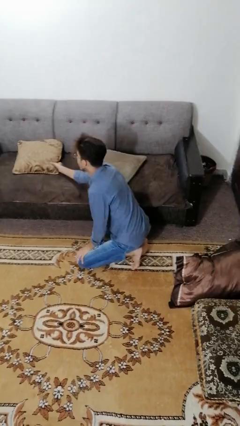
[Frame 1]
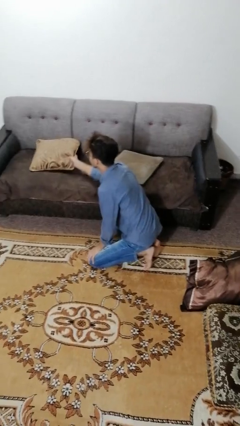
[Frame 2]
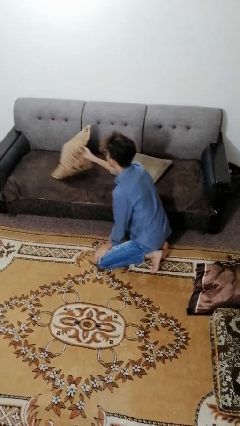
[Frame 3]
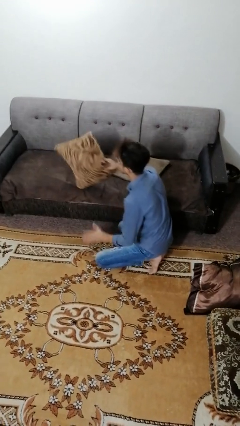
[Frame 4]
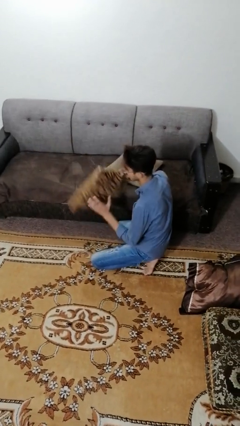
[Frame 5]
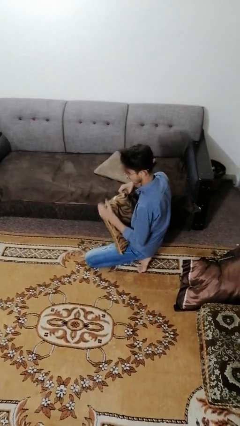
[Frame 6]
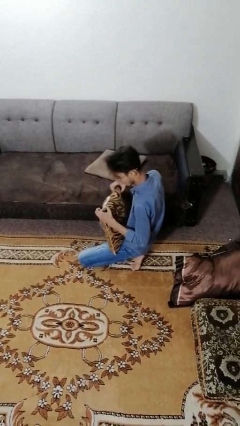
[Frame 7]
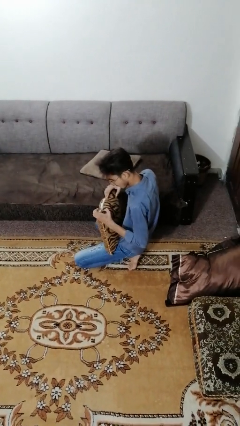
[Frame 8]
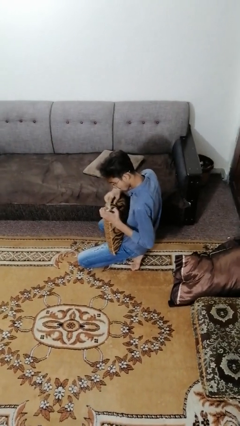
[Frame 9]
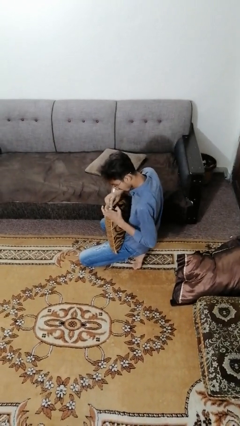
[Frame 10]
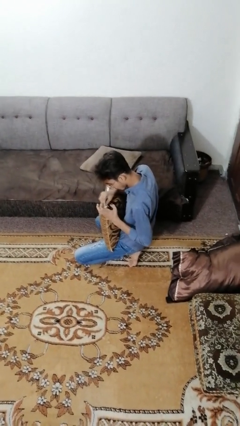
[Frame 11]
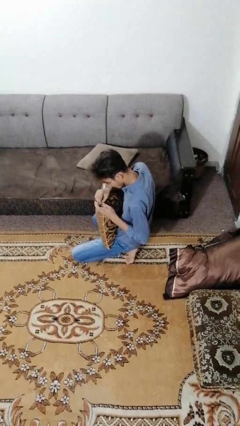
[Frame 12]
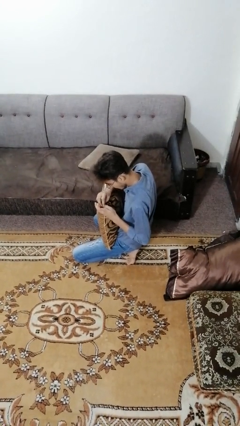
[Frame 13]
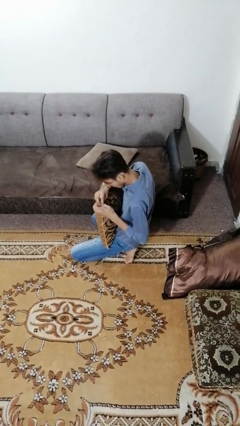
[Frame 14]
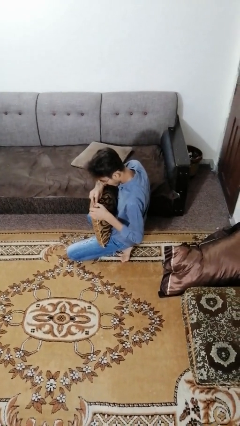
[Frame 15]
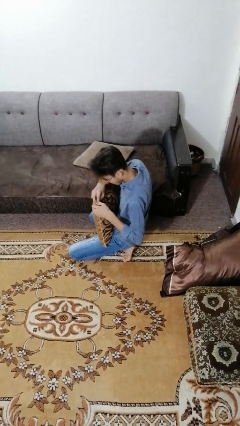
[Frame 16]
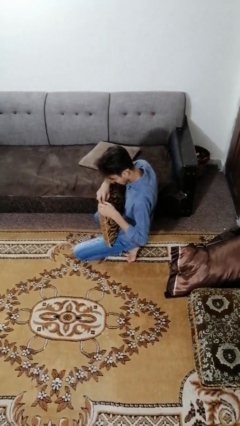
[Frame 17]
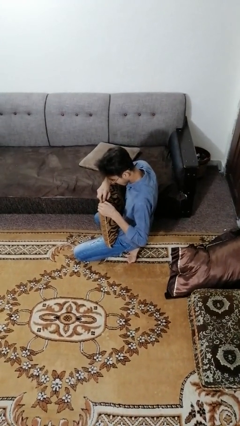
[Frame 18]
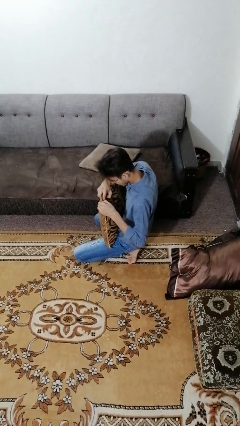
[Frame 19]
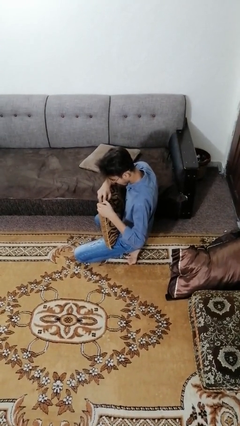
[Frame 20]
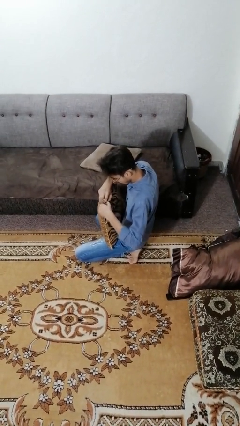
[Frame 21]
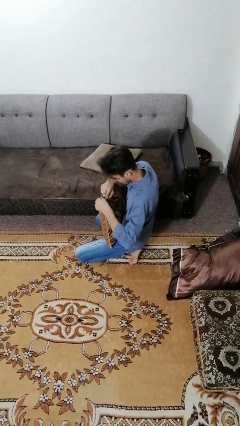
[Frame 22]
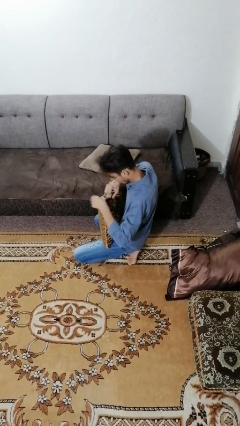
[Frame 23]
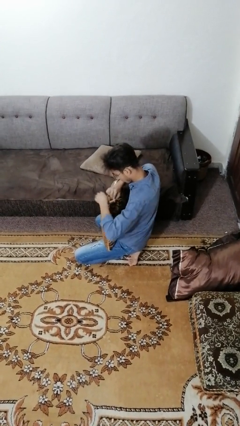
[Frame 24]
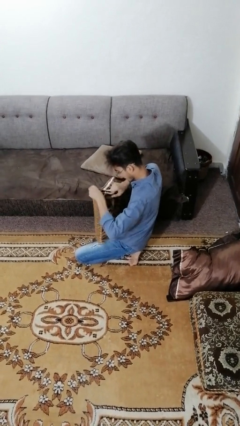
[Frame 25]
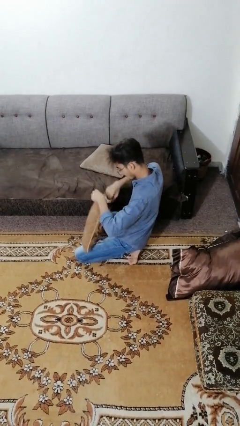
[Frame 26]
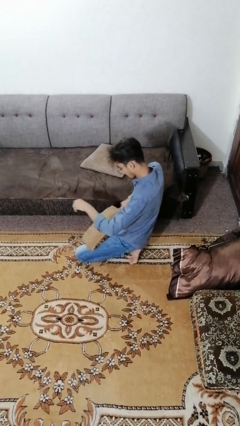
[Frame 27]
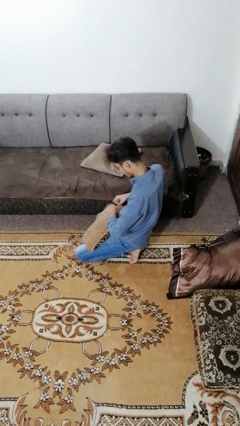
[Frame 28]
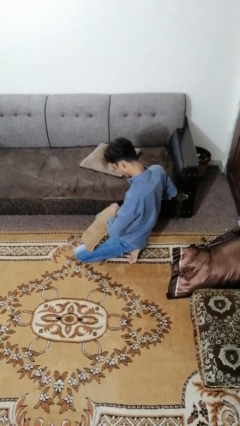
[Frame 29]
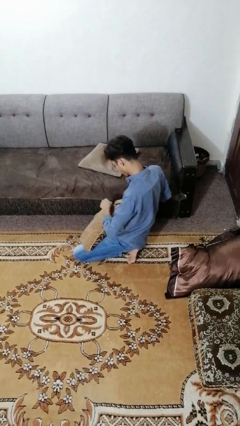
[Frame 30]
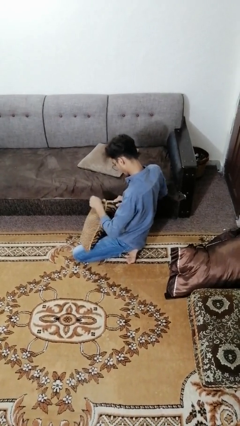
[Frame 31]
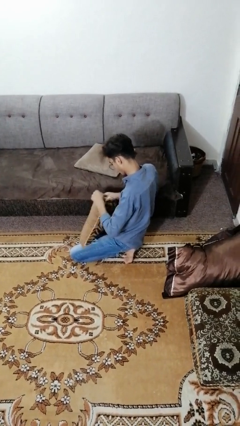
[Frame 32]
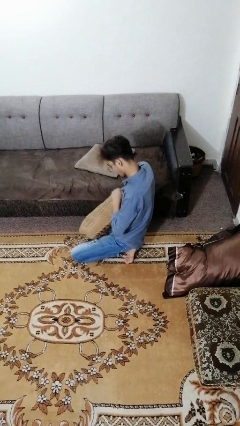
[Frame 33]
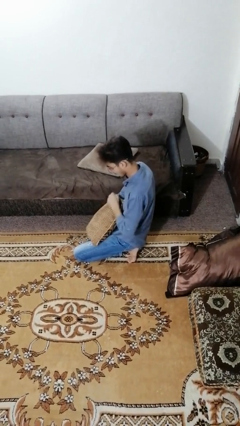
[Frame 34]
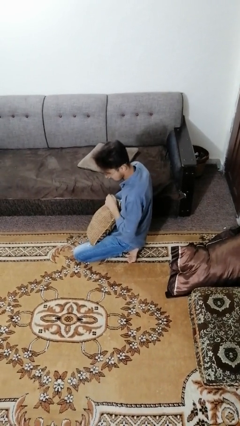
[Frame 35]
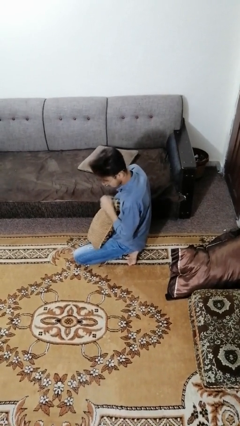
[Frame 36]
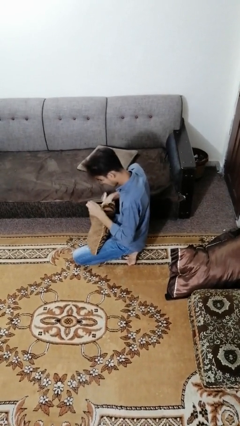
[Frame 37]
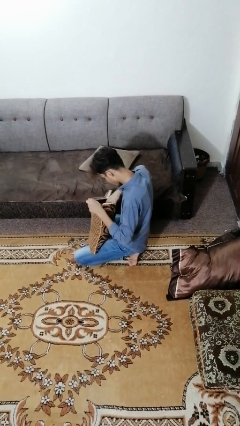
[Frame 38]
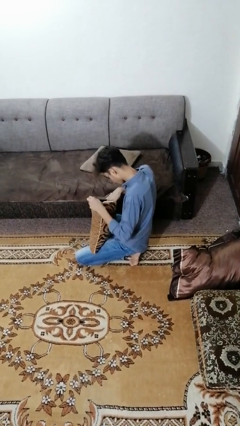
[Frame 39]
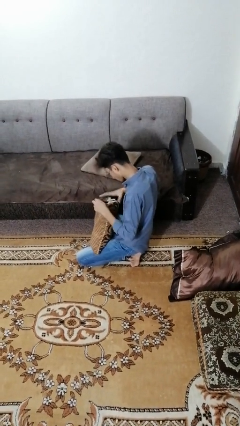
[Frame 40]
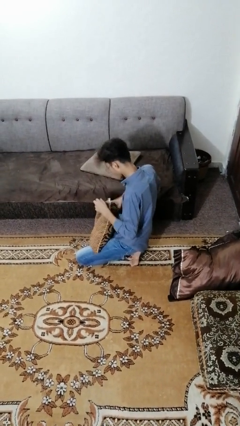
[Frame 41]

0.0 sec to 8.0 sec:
person searches in couch

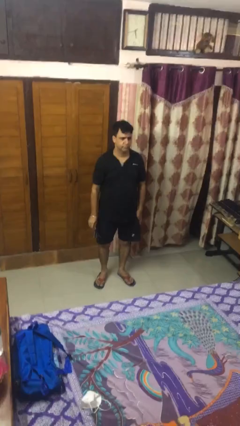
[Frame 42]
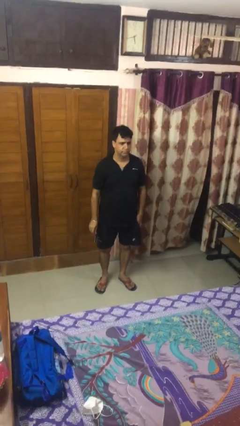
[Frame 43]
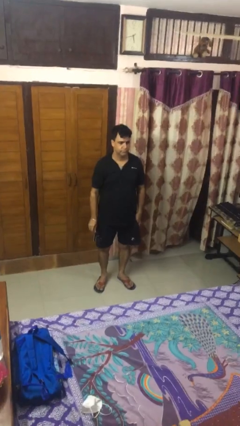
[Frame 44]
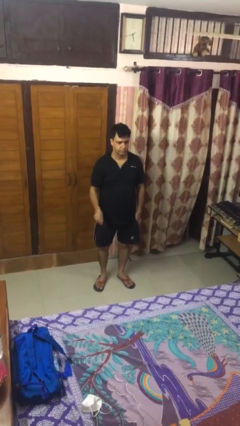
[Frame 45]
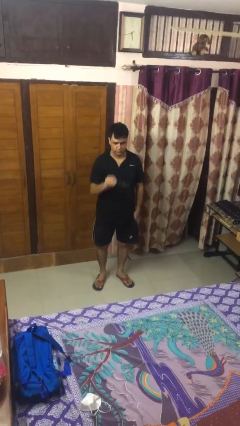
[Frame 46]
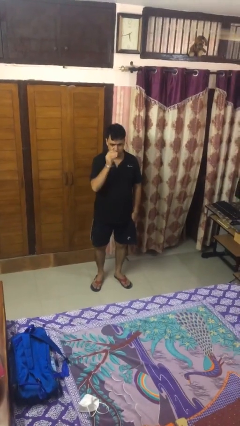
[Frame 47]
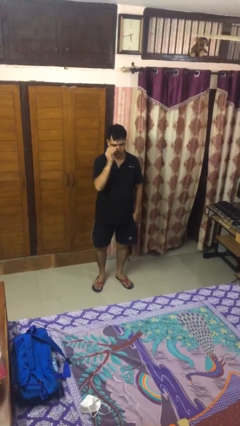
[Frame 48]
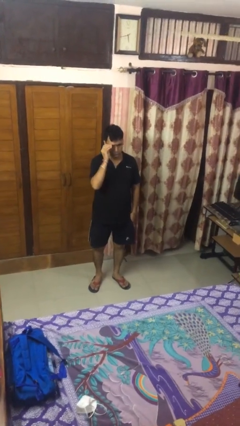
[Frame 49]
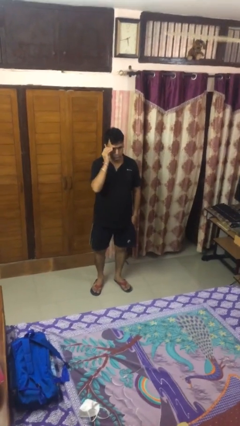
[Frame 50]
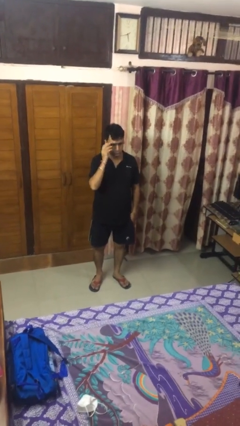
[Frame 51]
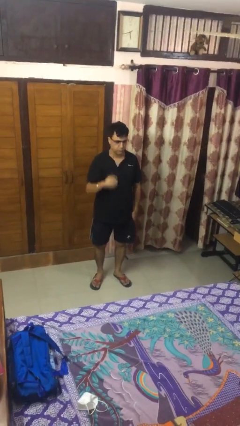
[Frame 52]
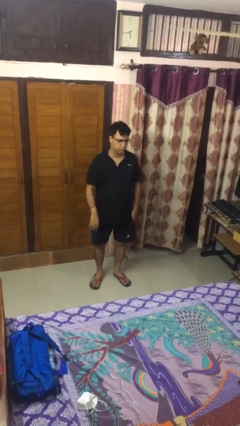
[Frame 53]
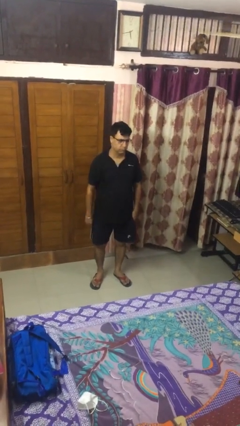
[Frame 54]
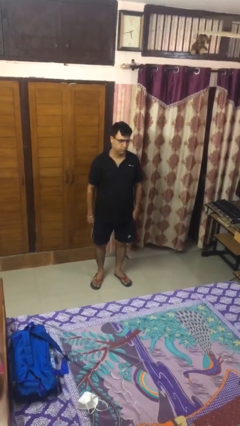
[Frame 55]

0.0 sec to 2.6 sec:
person puts on glasses

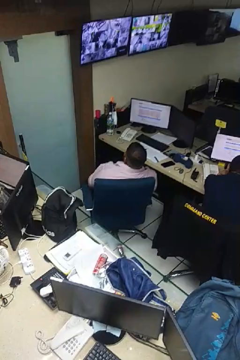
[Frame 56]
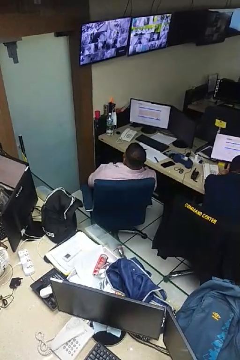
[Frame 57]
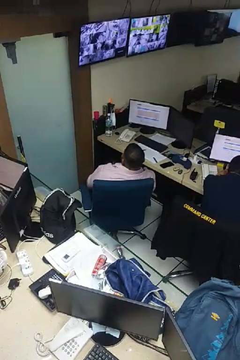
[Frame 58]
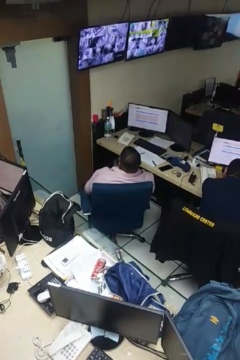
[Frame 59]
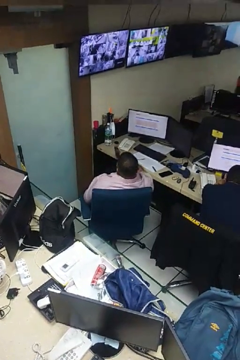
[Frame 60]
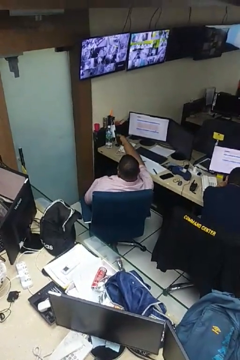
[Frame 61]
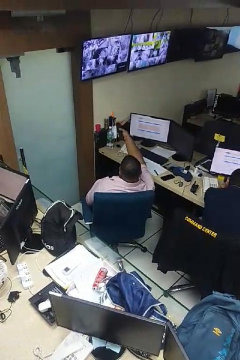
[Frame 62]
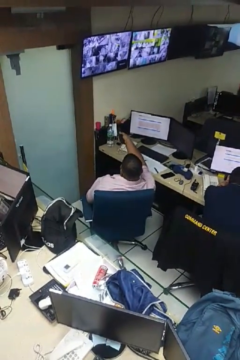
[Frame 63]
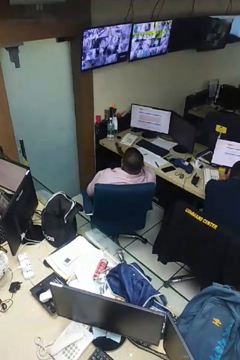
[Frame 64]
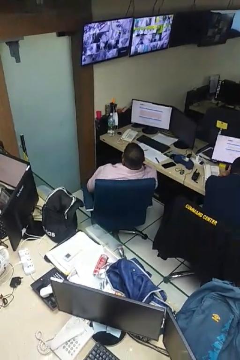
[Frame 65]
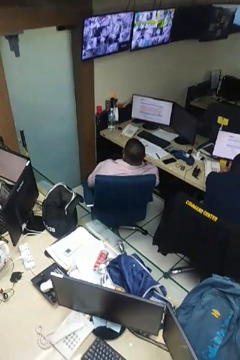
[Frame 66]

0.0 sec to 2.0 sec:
person uses television remote

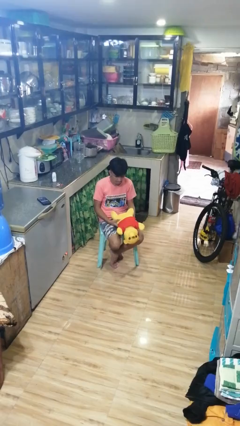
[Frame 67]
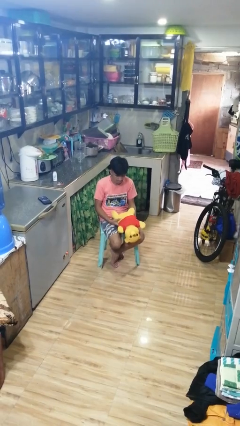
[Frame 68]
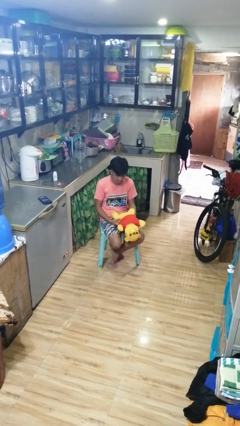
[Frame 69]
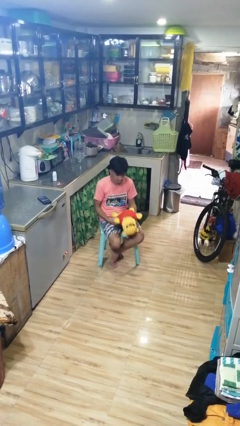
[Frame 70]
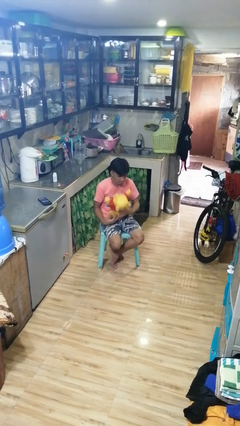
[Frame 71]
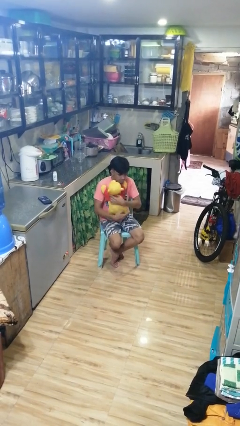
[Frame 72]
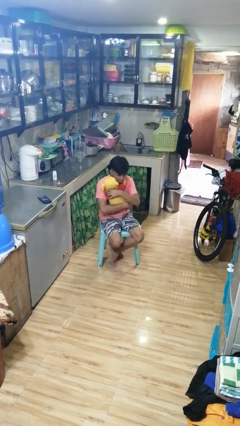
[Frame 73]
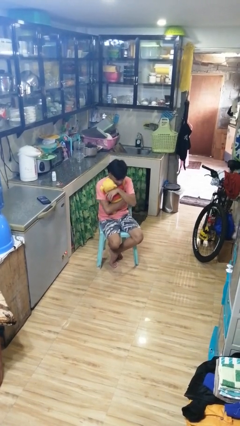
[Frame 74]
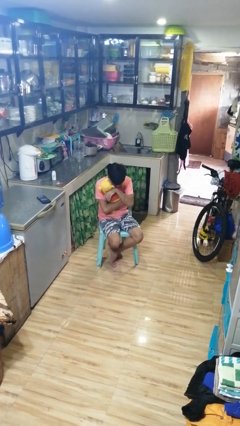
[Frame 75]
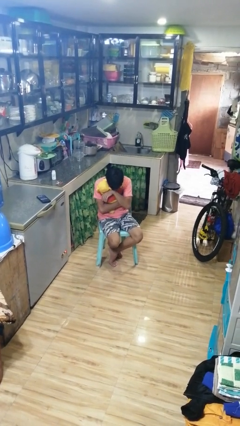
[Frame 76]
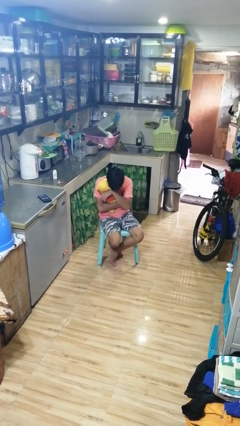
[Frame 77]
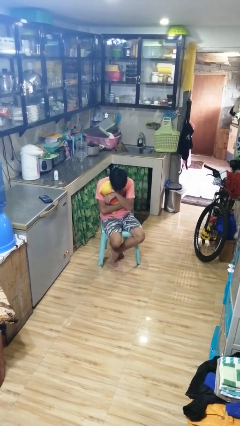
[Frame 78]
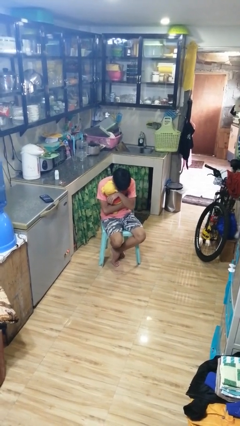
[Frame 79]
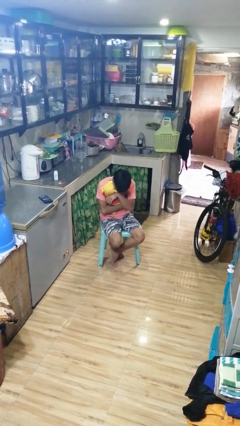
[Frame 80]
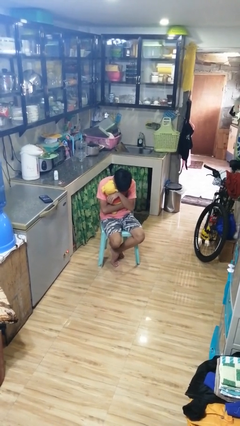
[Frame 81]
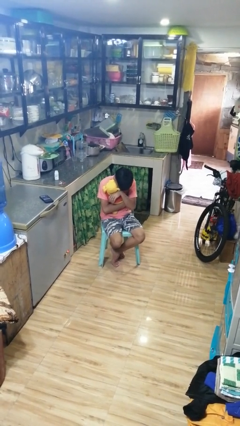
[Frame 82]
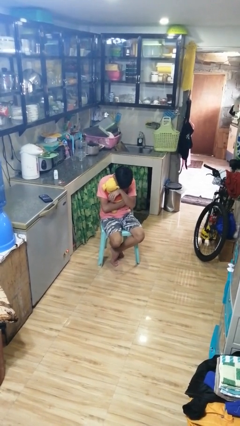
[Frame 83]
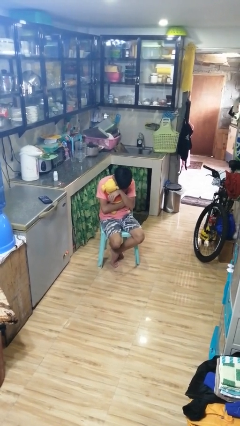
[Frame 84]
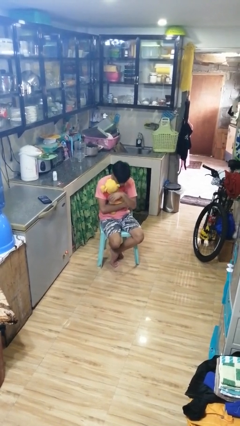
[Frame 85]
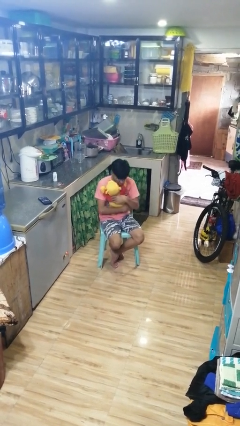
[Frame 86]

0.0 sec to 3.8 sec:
person hugs stuffed animal

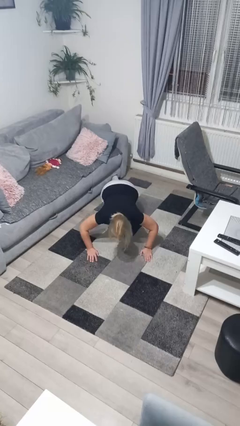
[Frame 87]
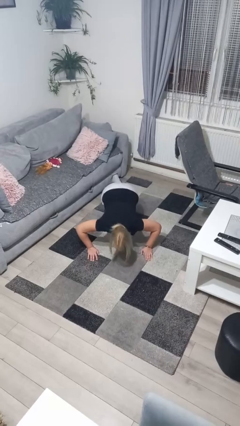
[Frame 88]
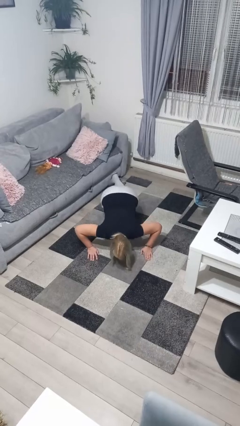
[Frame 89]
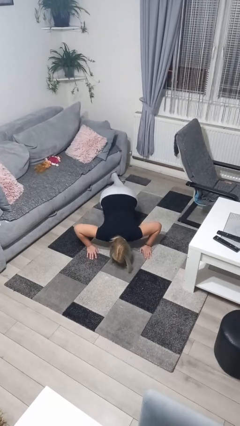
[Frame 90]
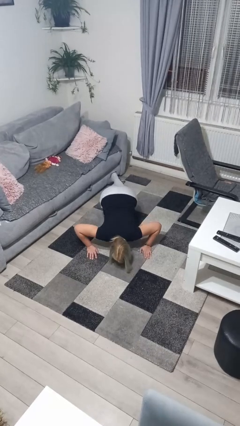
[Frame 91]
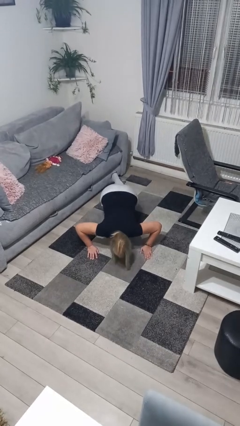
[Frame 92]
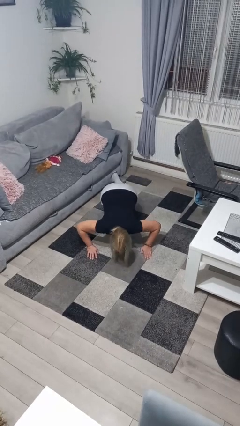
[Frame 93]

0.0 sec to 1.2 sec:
person exercises with pushup
